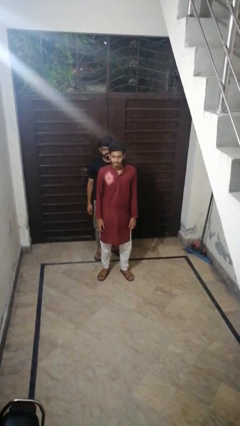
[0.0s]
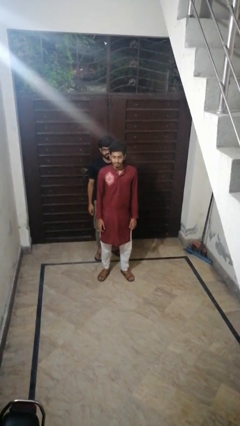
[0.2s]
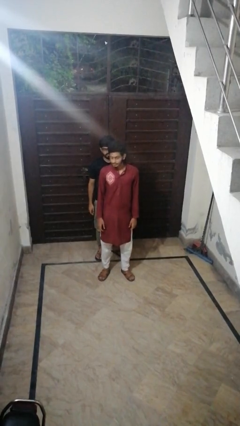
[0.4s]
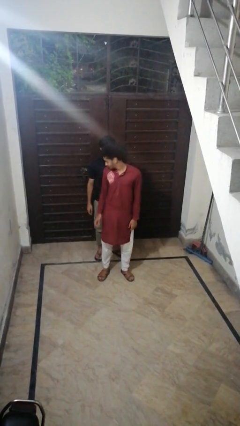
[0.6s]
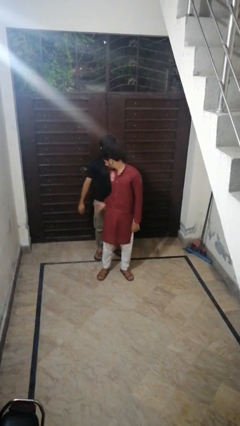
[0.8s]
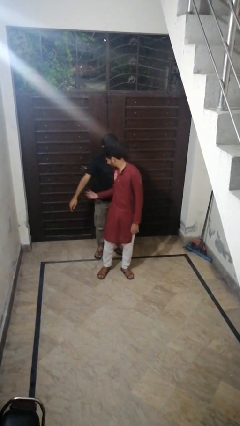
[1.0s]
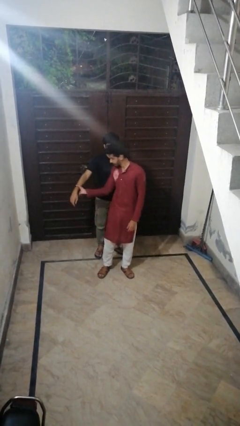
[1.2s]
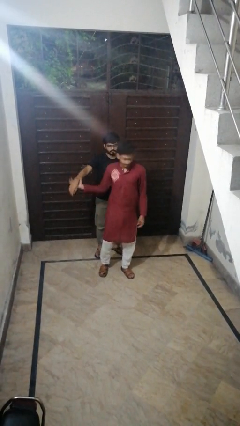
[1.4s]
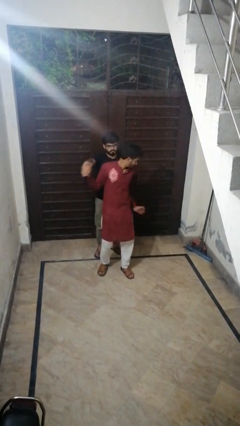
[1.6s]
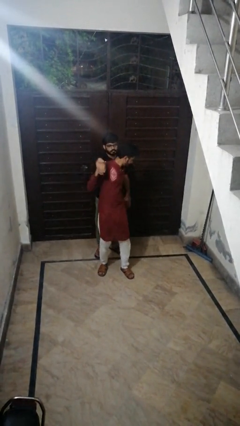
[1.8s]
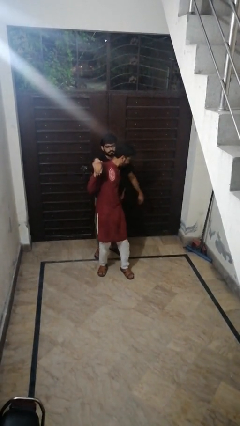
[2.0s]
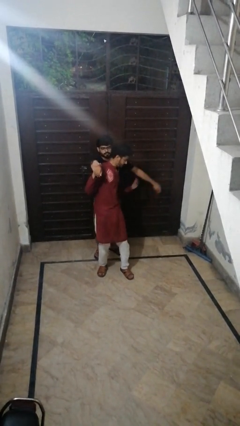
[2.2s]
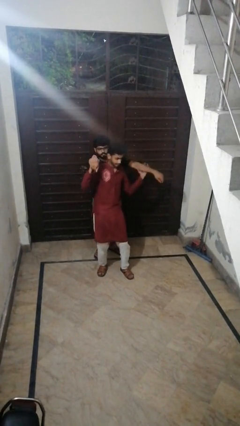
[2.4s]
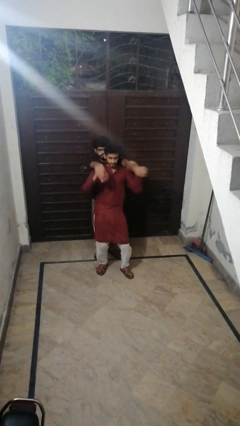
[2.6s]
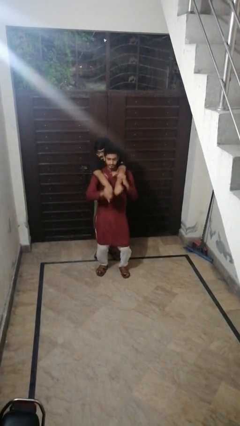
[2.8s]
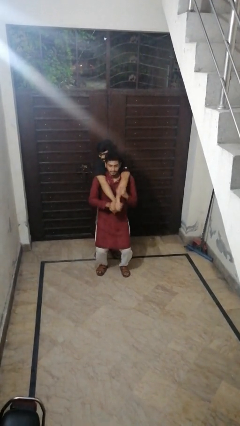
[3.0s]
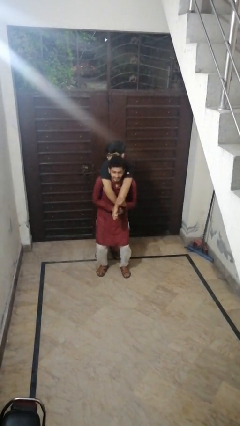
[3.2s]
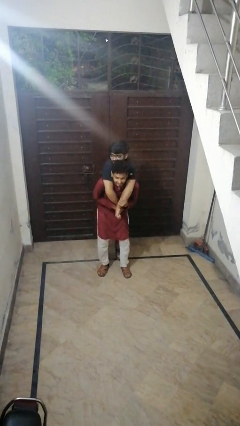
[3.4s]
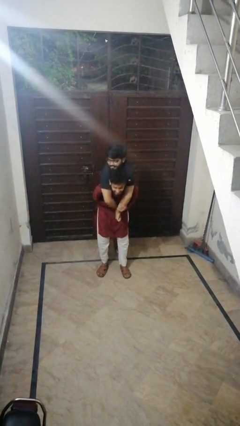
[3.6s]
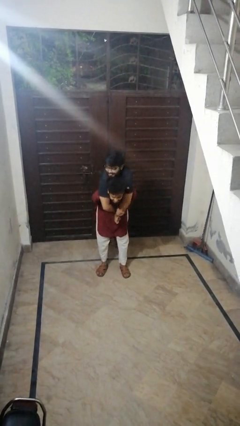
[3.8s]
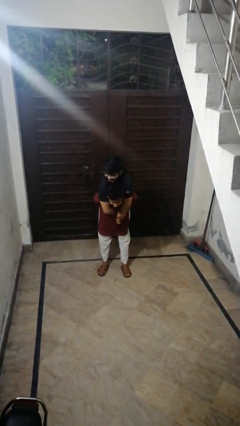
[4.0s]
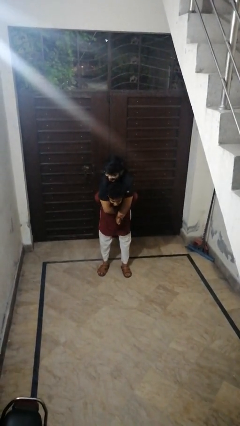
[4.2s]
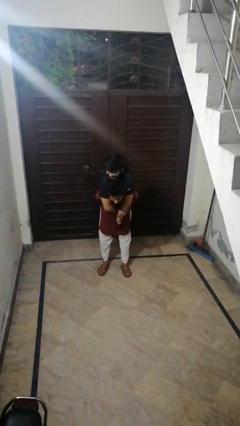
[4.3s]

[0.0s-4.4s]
person carries person over shoulder

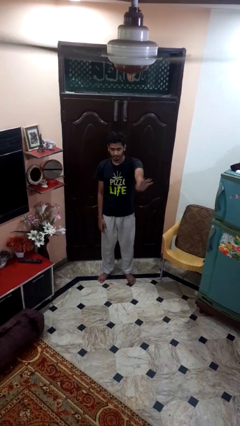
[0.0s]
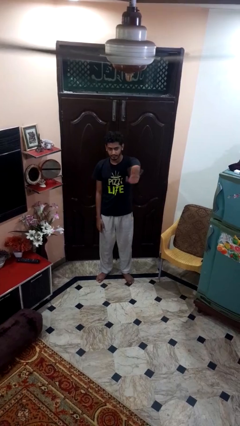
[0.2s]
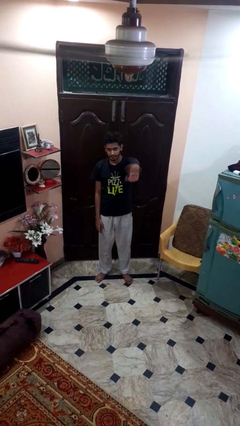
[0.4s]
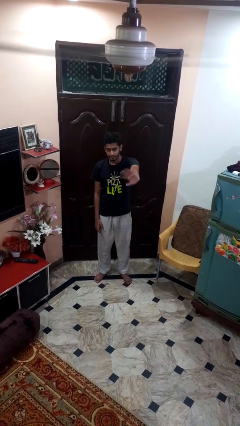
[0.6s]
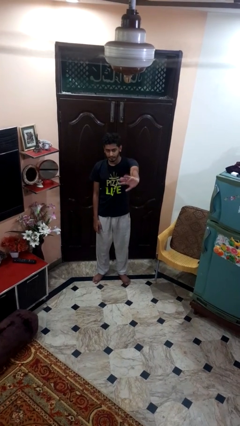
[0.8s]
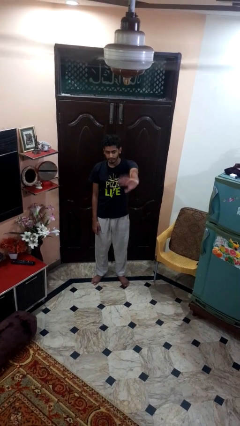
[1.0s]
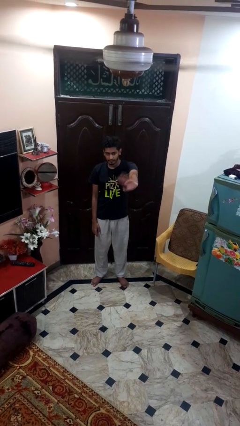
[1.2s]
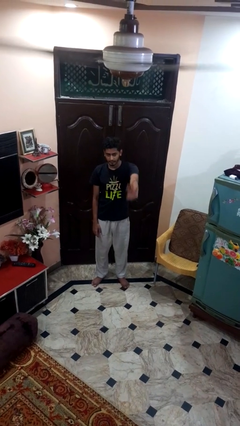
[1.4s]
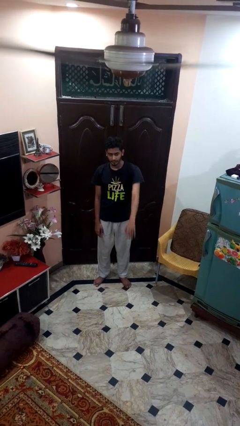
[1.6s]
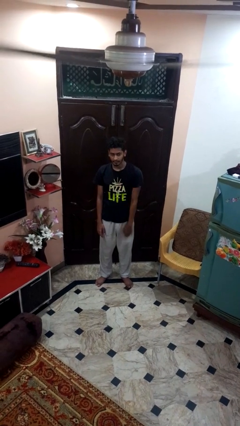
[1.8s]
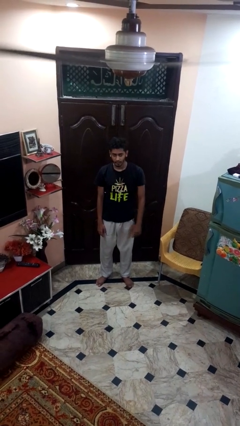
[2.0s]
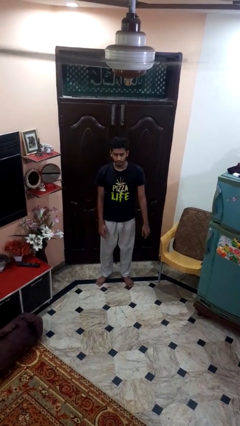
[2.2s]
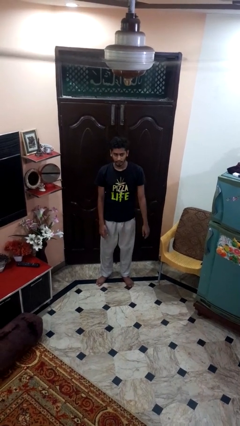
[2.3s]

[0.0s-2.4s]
person waves at person

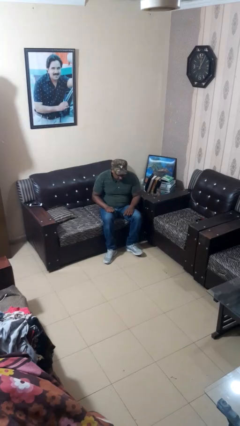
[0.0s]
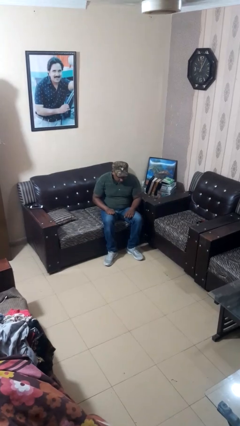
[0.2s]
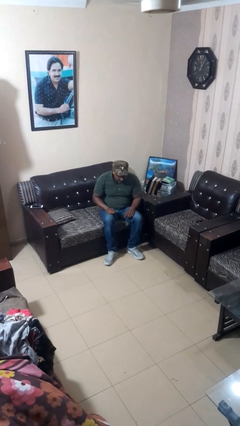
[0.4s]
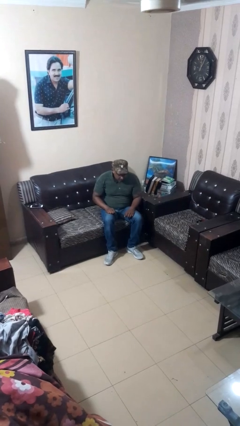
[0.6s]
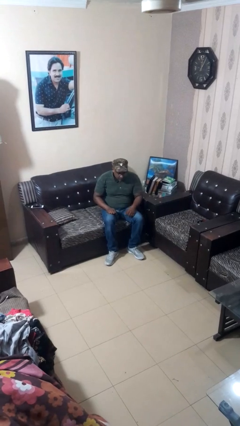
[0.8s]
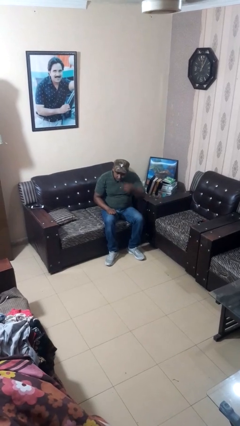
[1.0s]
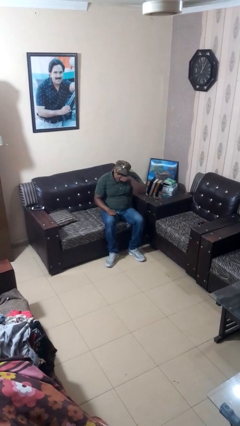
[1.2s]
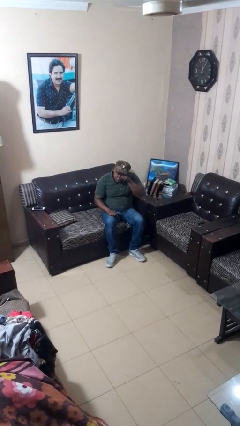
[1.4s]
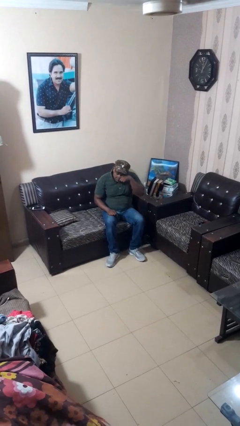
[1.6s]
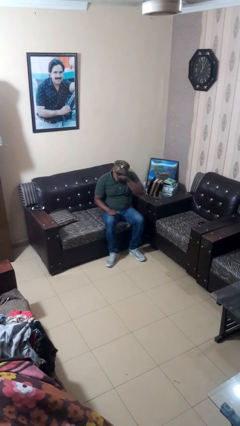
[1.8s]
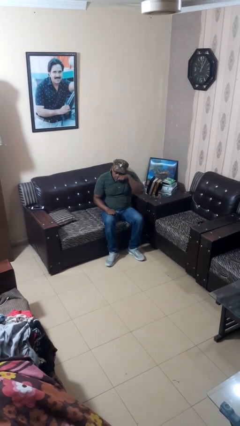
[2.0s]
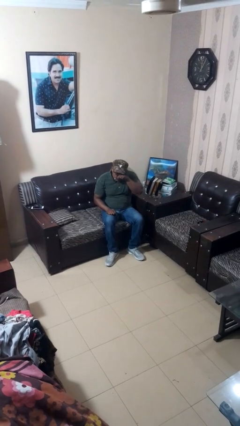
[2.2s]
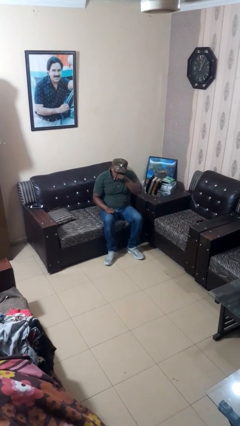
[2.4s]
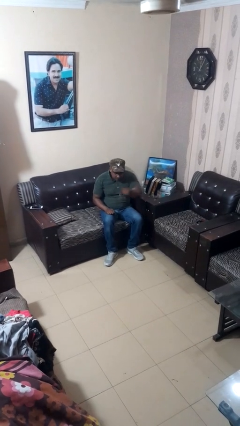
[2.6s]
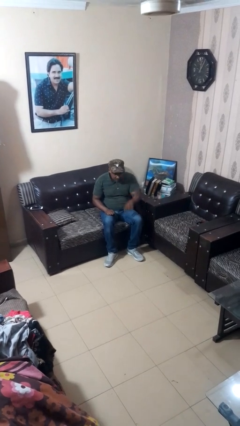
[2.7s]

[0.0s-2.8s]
person rubs eyes

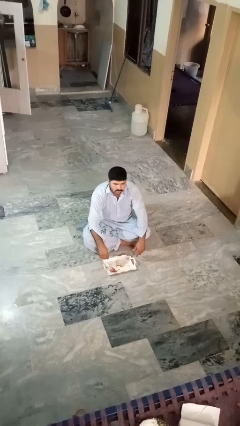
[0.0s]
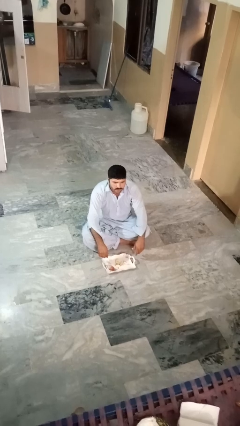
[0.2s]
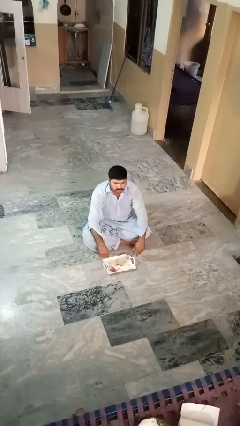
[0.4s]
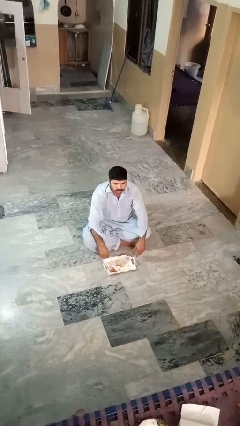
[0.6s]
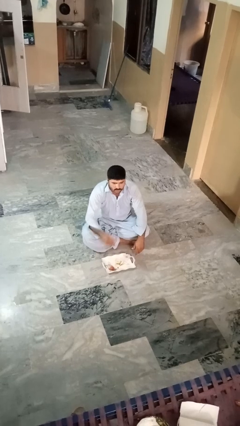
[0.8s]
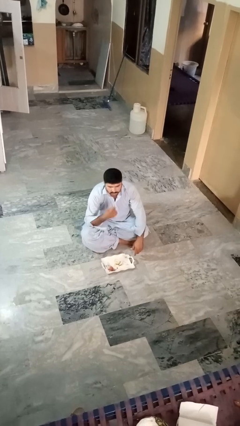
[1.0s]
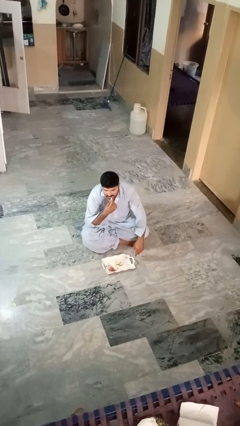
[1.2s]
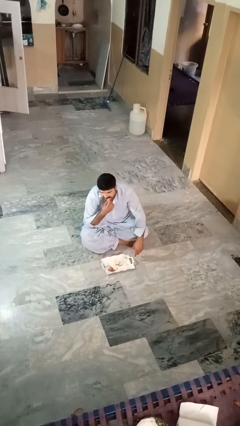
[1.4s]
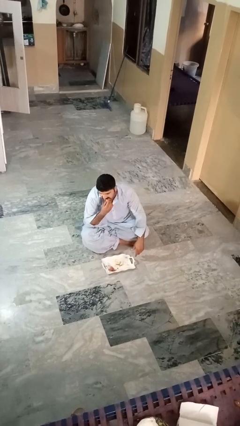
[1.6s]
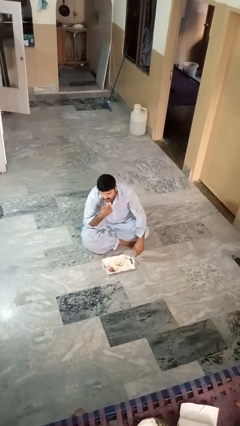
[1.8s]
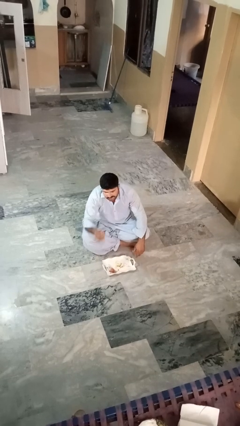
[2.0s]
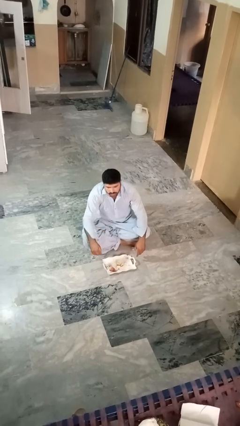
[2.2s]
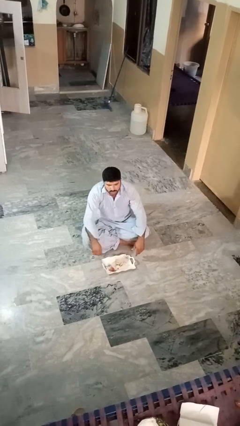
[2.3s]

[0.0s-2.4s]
person eats apple

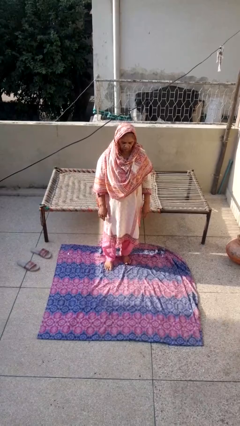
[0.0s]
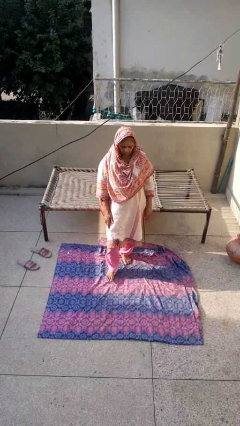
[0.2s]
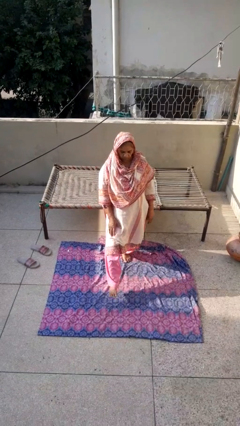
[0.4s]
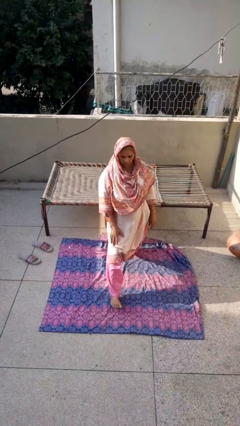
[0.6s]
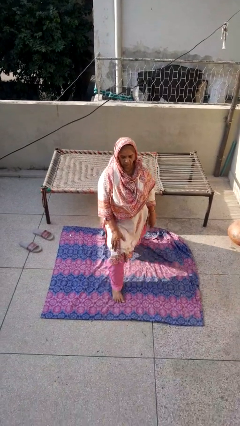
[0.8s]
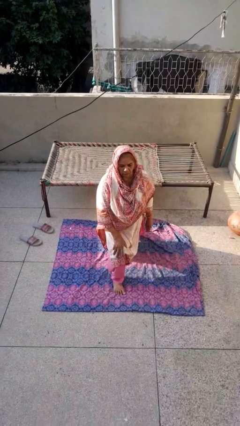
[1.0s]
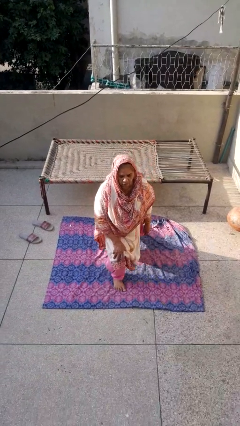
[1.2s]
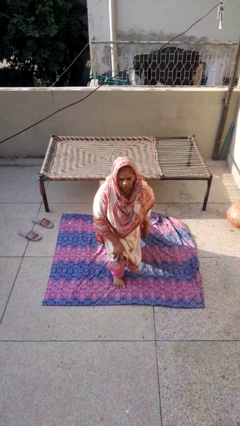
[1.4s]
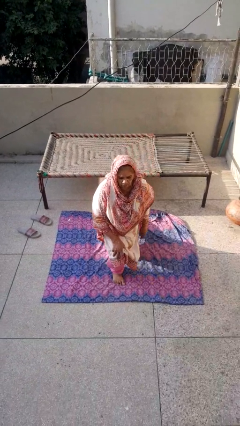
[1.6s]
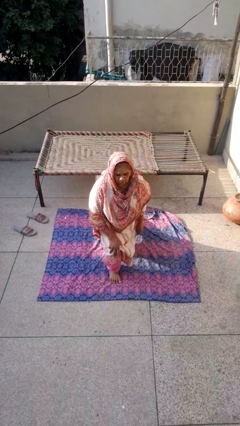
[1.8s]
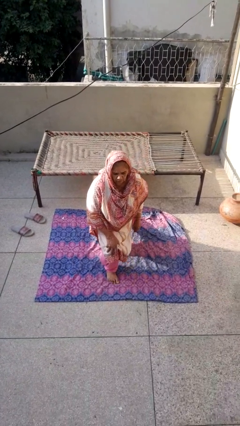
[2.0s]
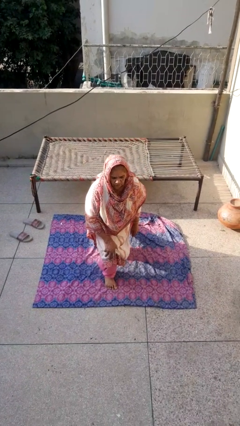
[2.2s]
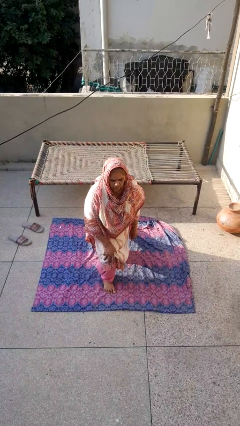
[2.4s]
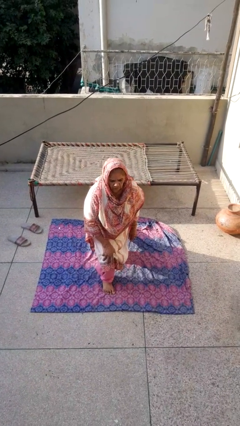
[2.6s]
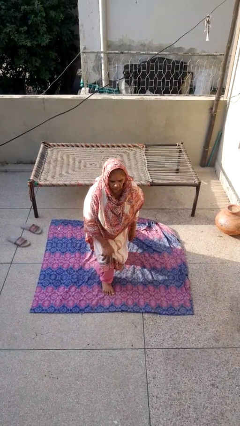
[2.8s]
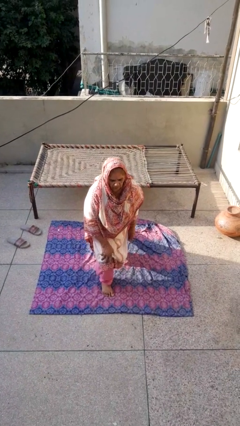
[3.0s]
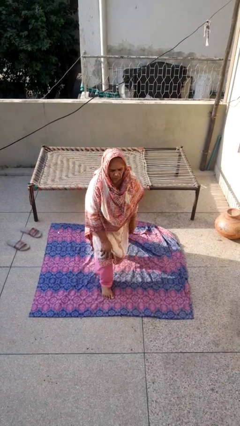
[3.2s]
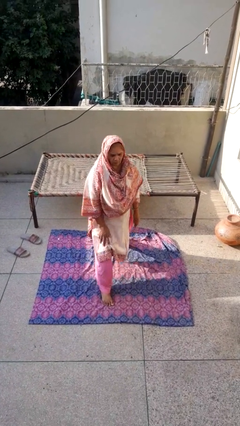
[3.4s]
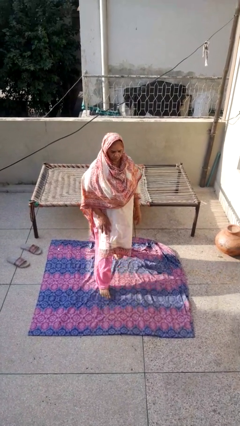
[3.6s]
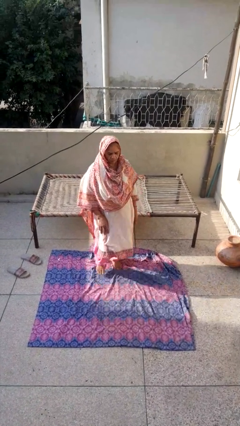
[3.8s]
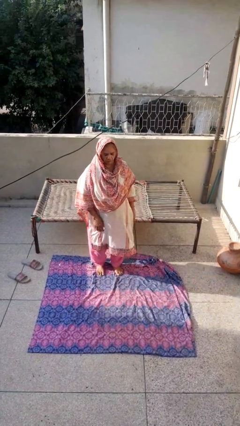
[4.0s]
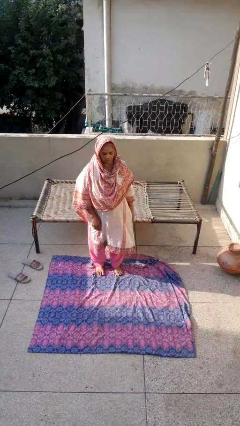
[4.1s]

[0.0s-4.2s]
person exercises with lunges

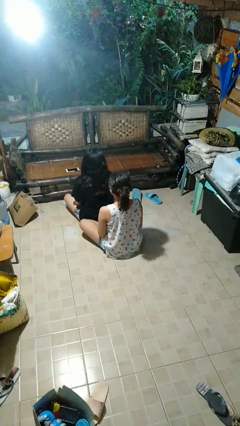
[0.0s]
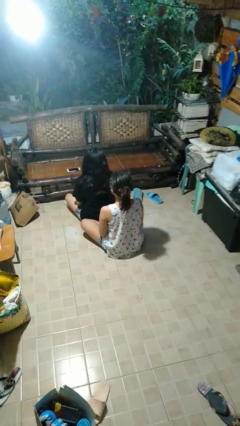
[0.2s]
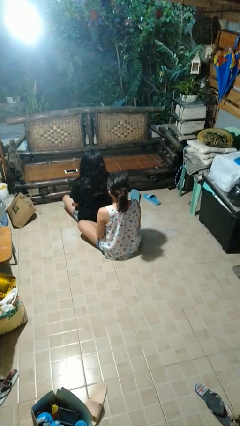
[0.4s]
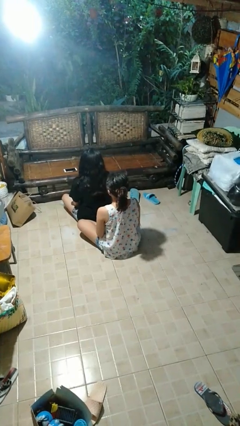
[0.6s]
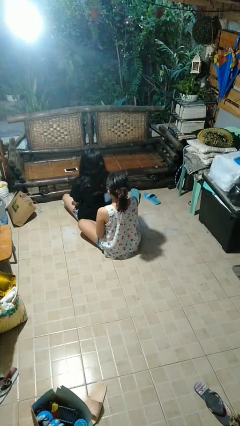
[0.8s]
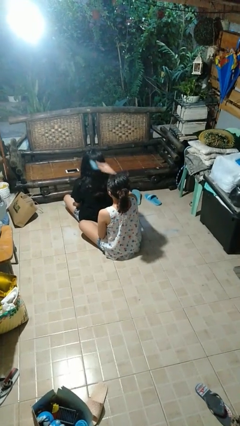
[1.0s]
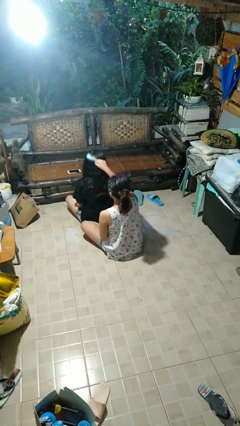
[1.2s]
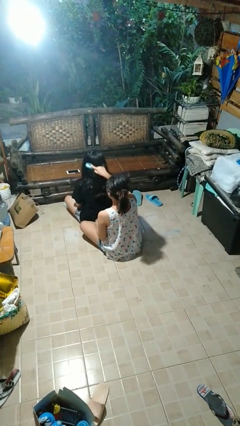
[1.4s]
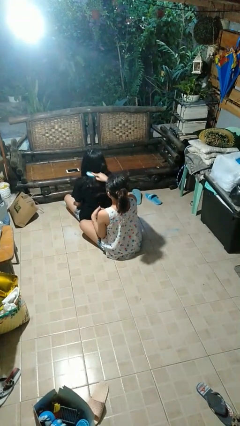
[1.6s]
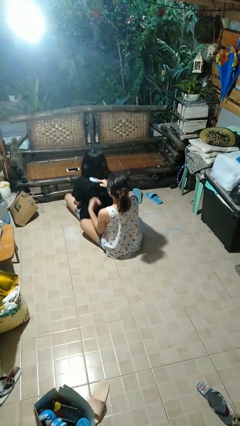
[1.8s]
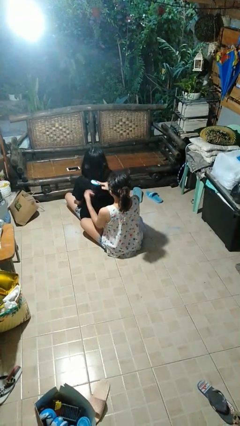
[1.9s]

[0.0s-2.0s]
person brushes hair of person
